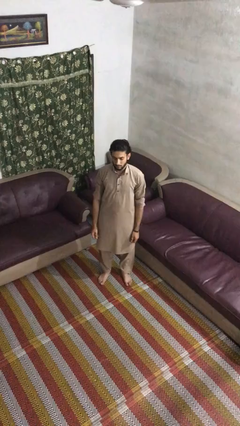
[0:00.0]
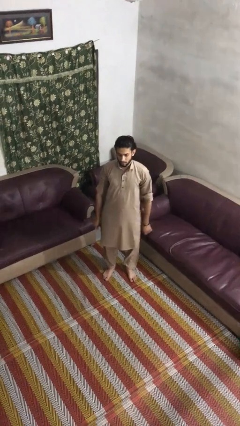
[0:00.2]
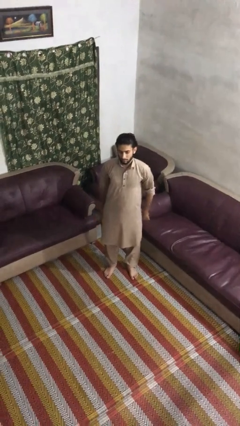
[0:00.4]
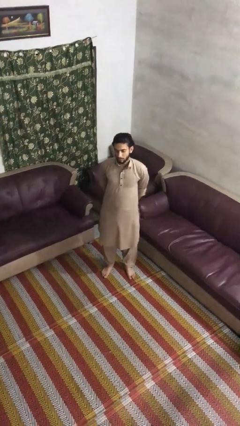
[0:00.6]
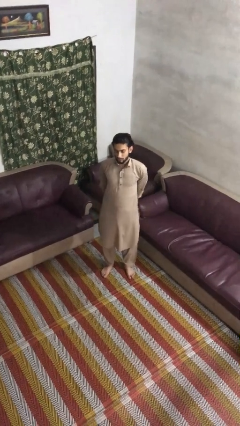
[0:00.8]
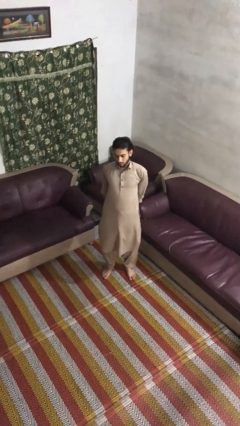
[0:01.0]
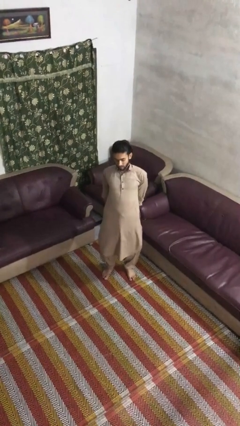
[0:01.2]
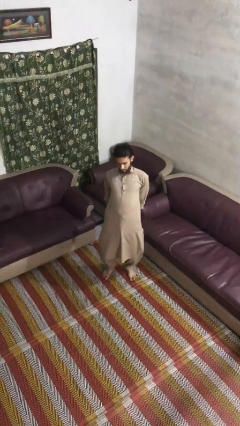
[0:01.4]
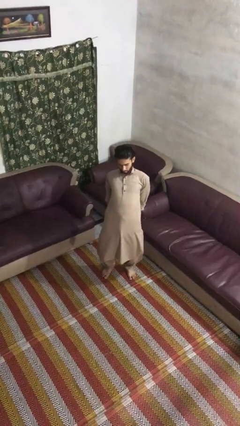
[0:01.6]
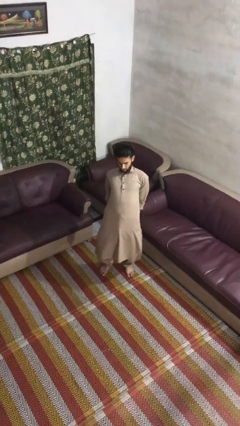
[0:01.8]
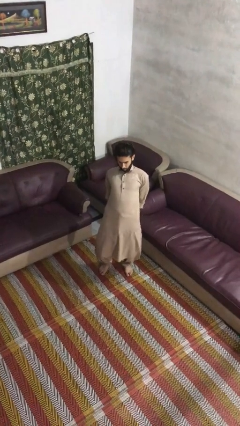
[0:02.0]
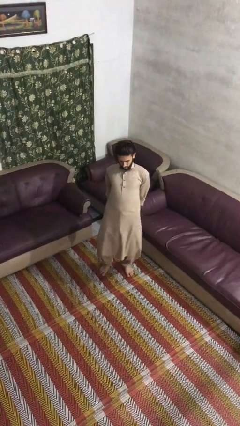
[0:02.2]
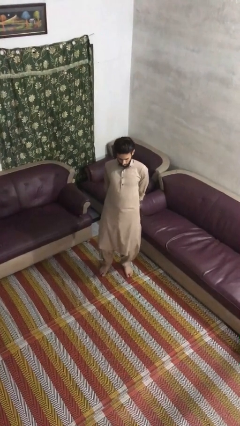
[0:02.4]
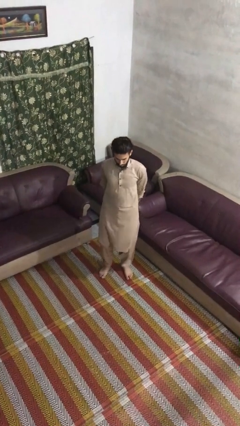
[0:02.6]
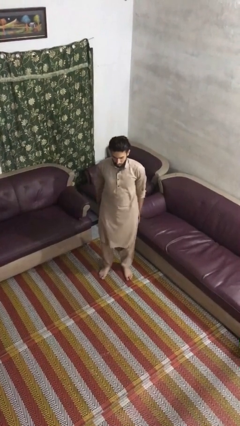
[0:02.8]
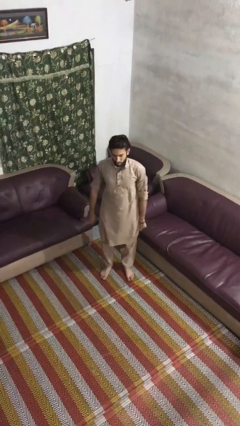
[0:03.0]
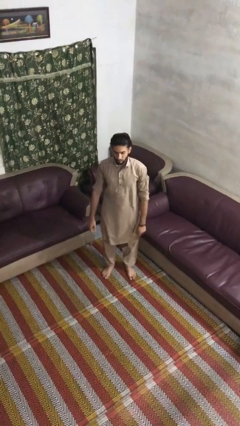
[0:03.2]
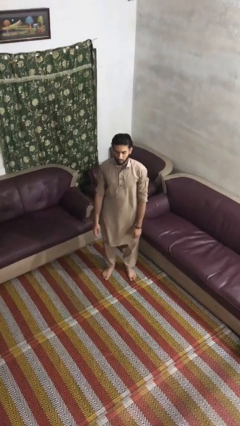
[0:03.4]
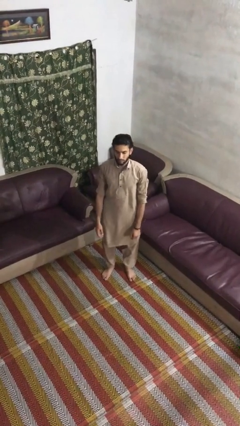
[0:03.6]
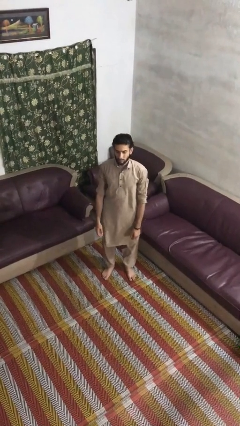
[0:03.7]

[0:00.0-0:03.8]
person stretches back

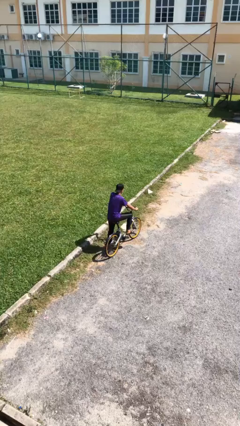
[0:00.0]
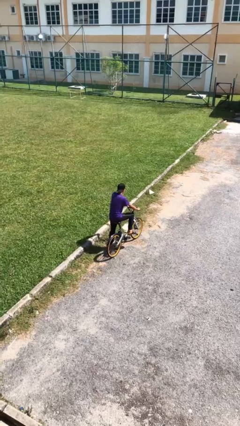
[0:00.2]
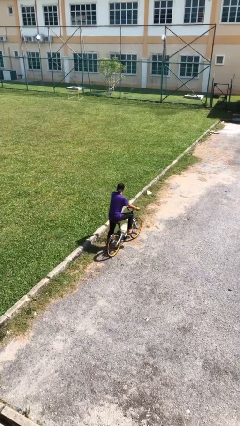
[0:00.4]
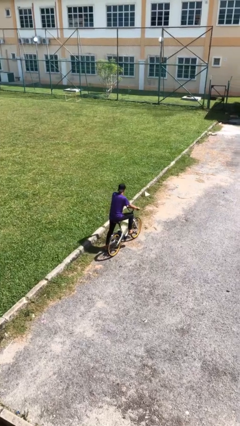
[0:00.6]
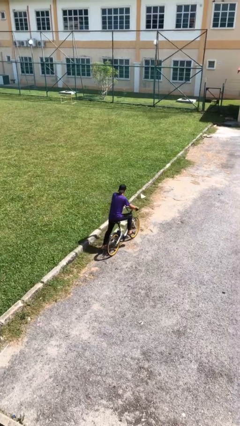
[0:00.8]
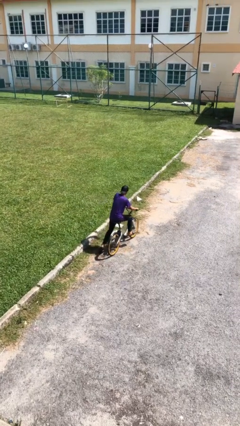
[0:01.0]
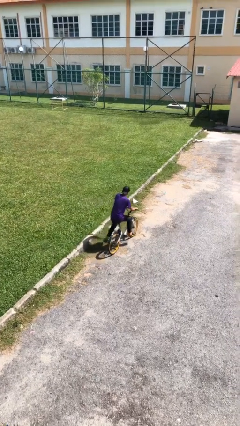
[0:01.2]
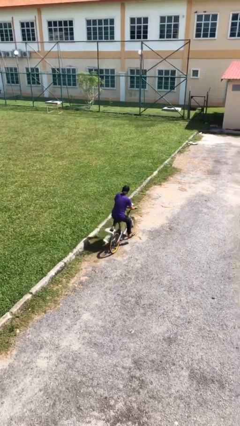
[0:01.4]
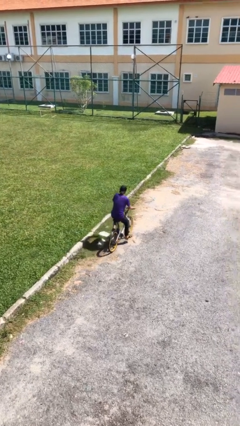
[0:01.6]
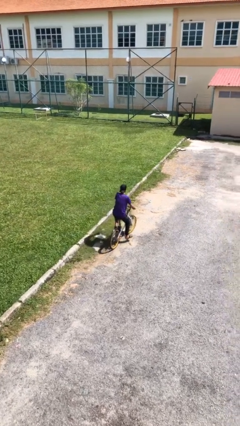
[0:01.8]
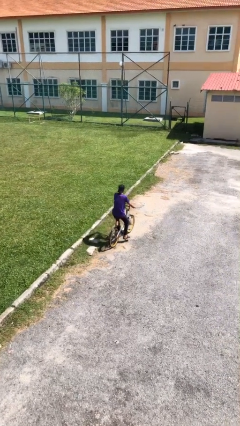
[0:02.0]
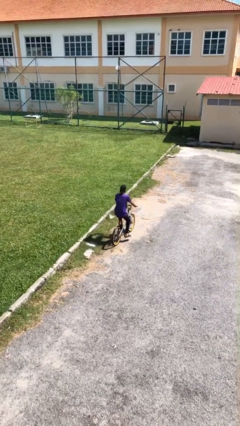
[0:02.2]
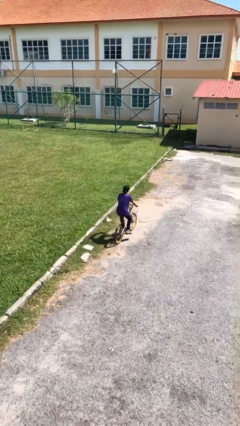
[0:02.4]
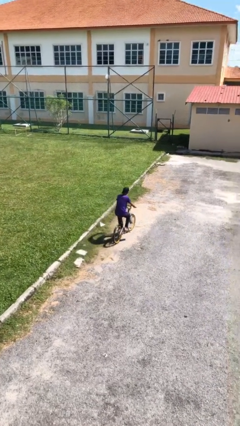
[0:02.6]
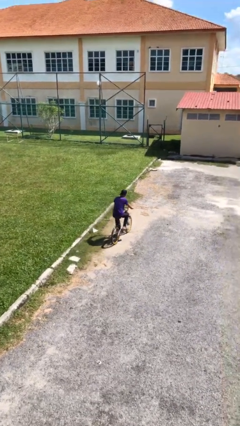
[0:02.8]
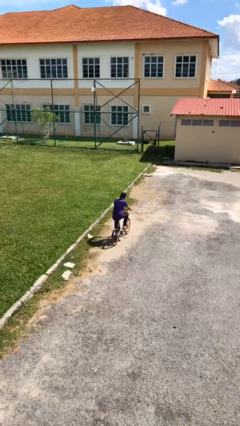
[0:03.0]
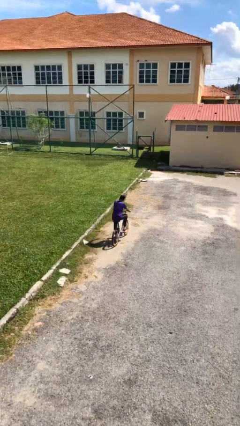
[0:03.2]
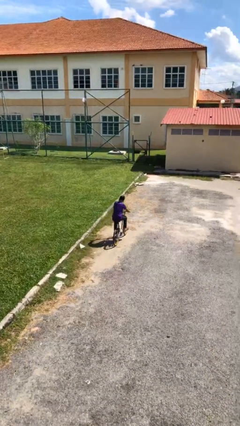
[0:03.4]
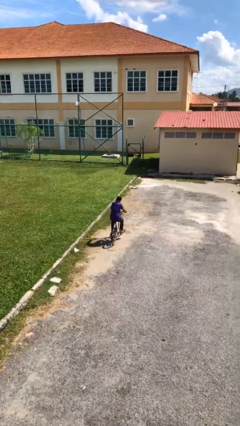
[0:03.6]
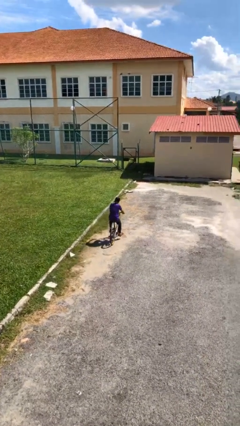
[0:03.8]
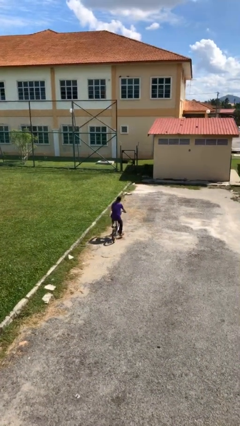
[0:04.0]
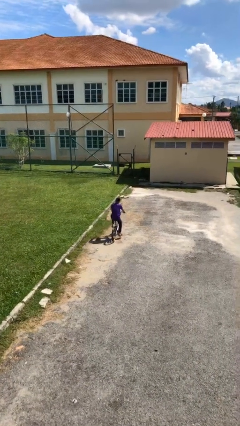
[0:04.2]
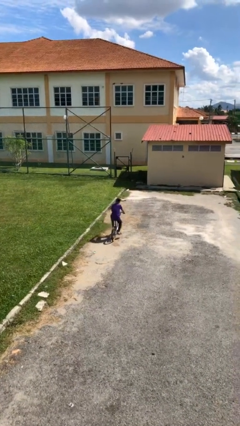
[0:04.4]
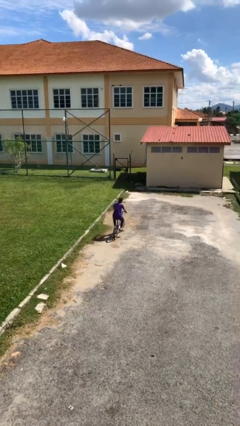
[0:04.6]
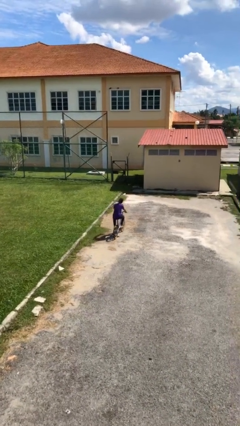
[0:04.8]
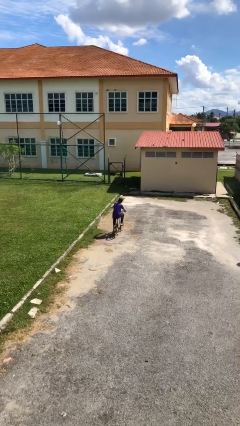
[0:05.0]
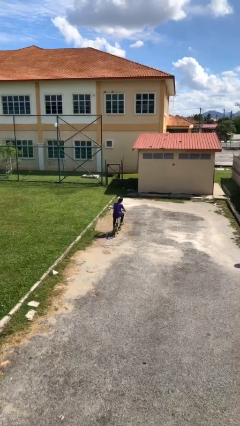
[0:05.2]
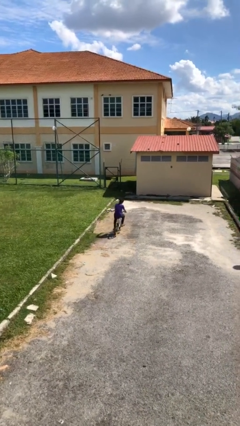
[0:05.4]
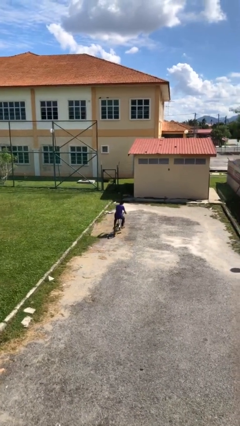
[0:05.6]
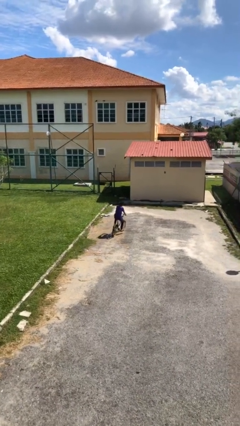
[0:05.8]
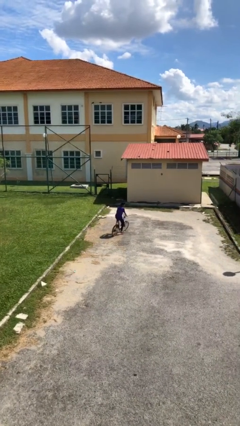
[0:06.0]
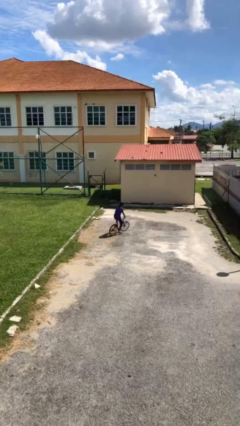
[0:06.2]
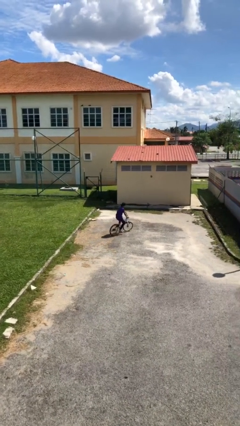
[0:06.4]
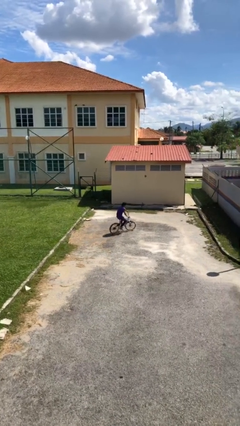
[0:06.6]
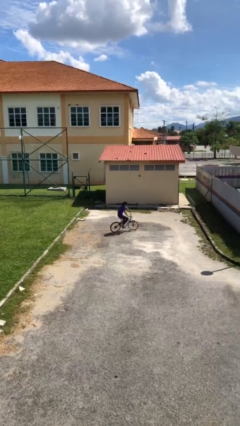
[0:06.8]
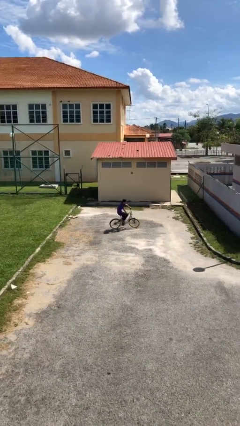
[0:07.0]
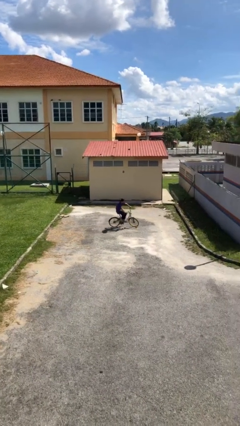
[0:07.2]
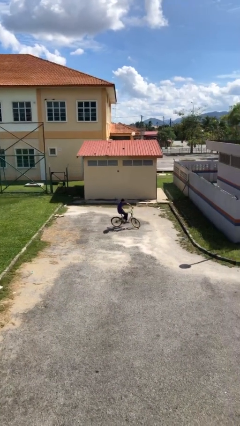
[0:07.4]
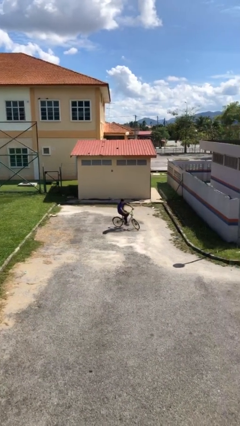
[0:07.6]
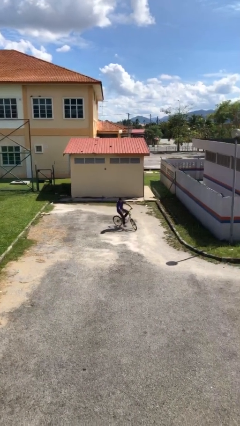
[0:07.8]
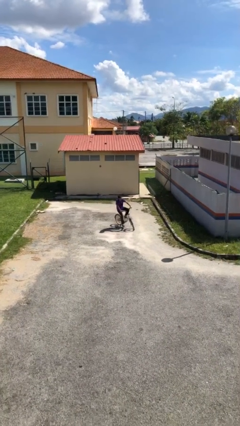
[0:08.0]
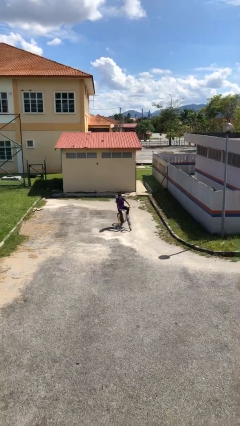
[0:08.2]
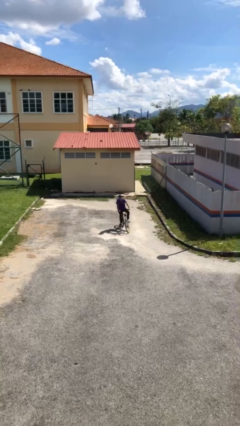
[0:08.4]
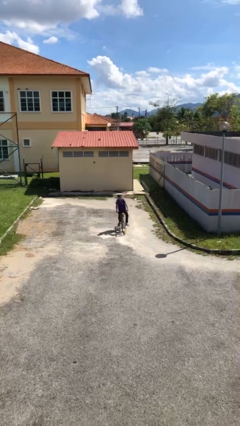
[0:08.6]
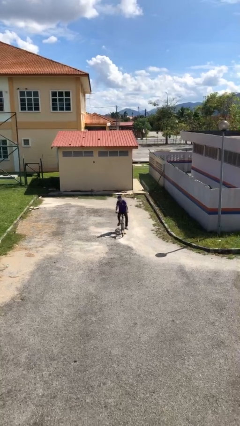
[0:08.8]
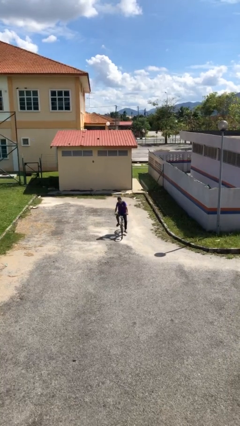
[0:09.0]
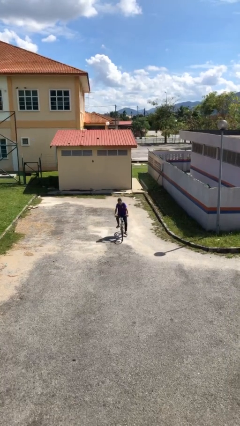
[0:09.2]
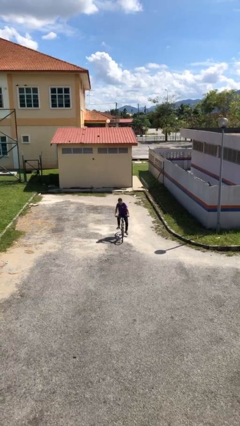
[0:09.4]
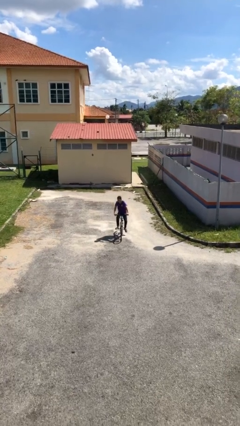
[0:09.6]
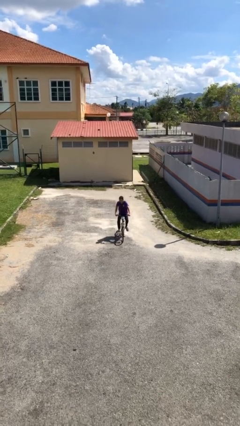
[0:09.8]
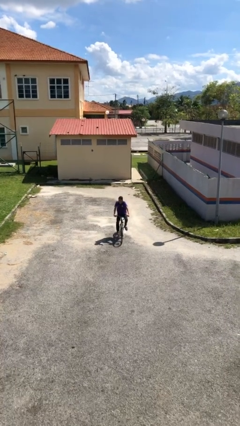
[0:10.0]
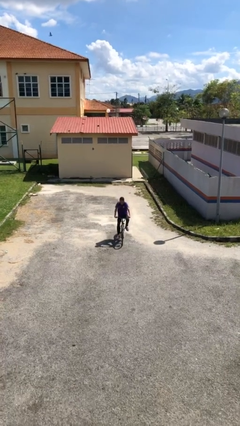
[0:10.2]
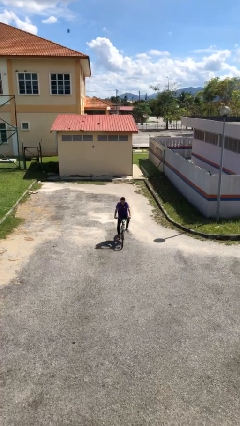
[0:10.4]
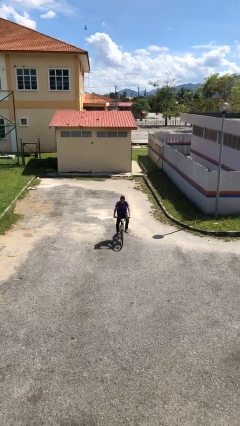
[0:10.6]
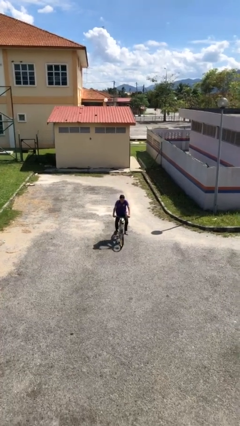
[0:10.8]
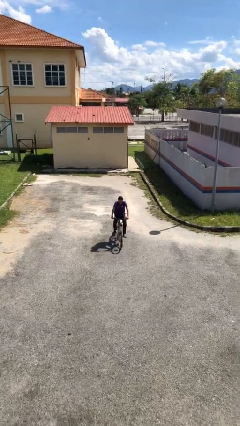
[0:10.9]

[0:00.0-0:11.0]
person rides bicycle

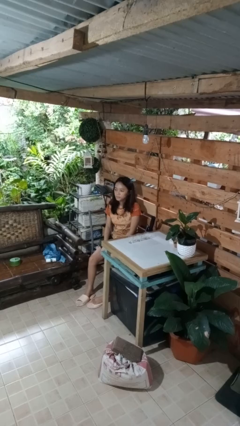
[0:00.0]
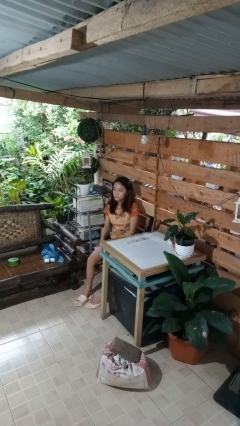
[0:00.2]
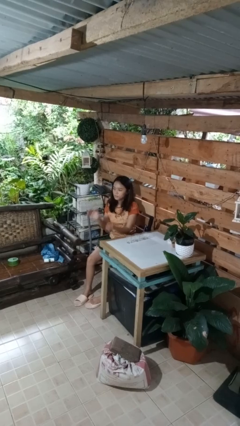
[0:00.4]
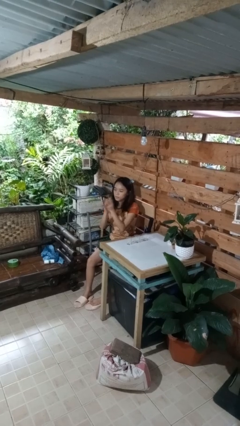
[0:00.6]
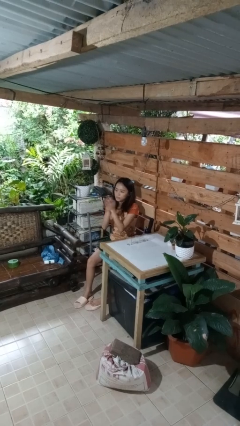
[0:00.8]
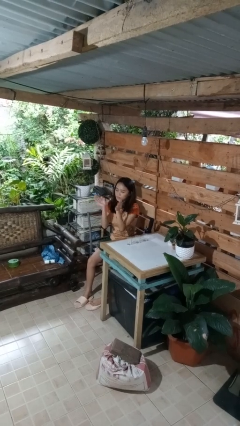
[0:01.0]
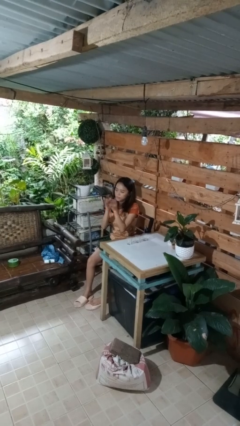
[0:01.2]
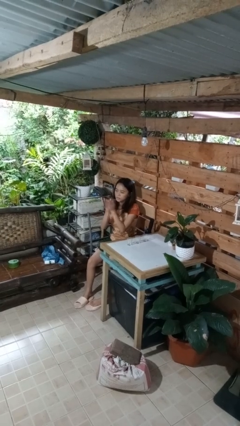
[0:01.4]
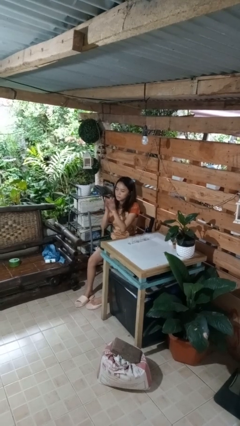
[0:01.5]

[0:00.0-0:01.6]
person claps hands

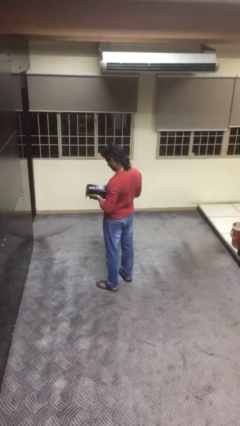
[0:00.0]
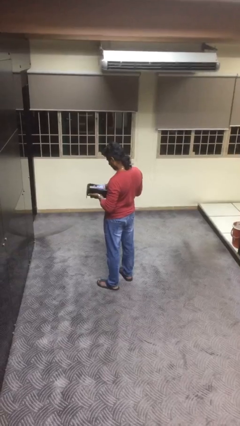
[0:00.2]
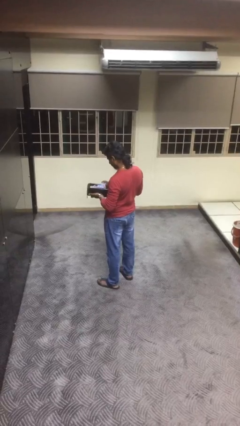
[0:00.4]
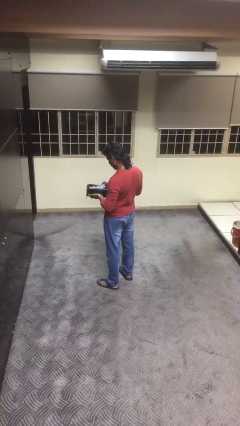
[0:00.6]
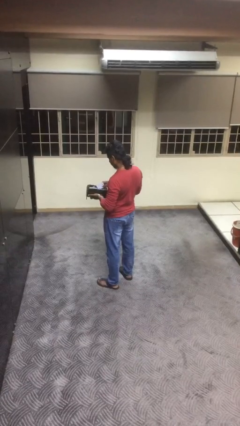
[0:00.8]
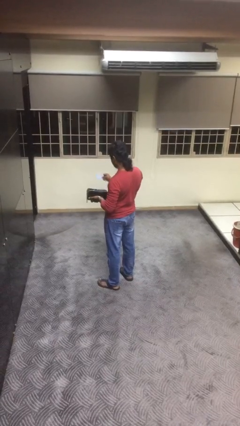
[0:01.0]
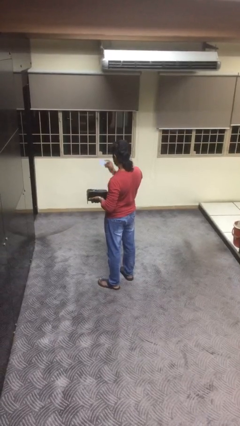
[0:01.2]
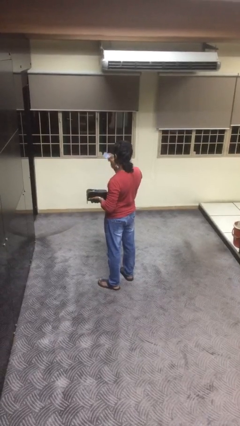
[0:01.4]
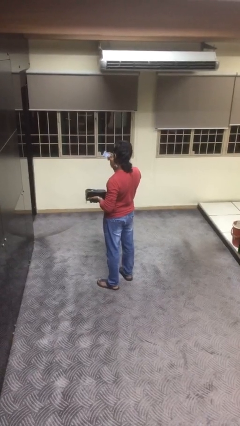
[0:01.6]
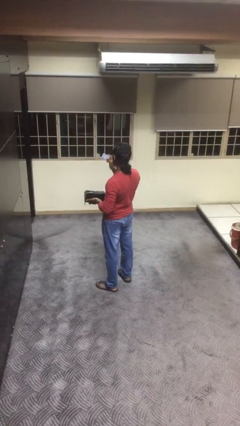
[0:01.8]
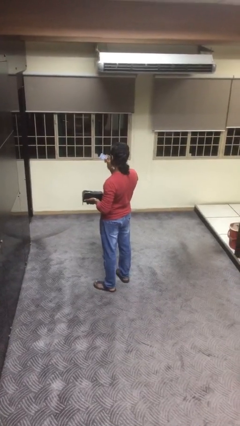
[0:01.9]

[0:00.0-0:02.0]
person takes object from purse
